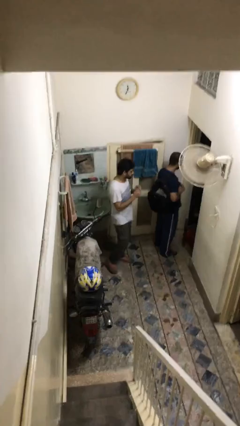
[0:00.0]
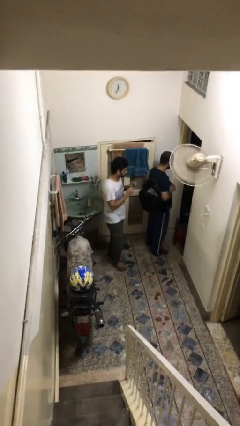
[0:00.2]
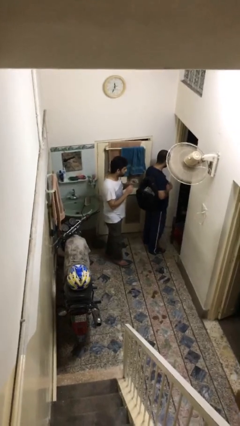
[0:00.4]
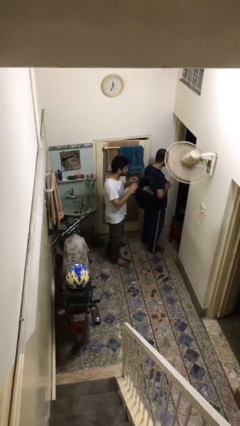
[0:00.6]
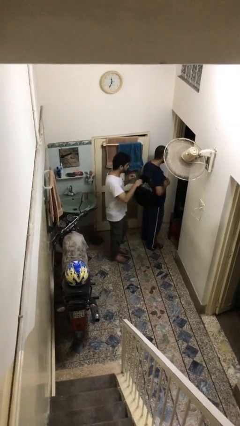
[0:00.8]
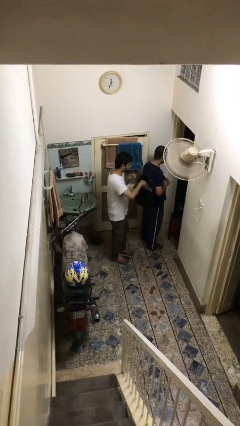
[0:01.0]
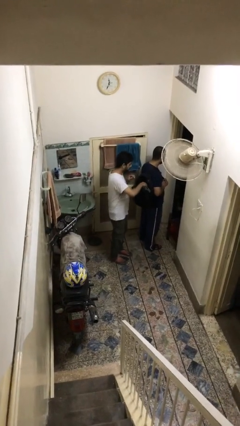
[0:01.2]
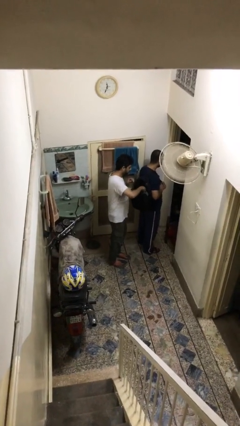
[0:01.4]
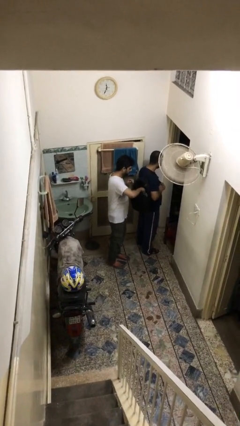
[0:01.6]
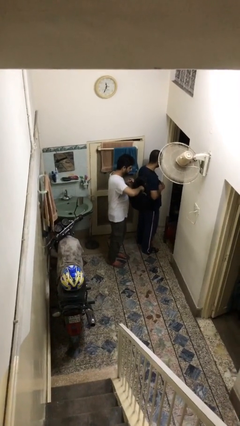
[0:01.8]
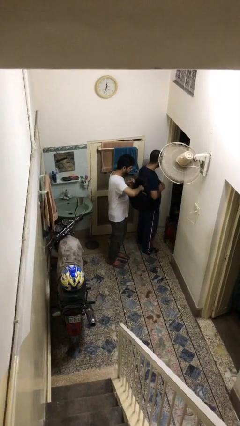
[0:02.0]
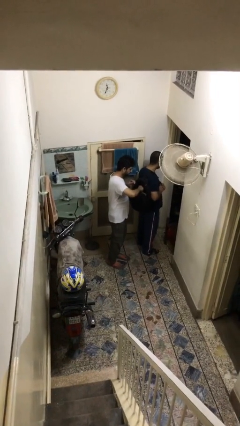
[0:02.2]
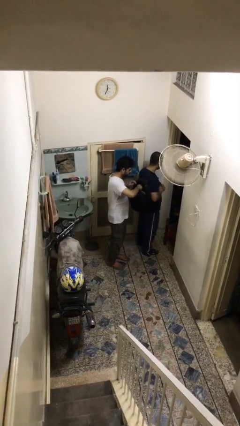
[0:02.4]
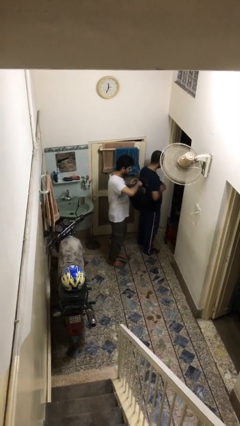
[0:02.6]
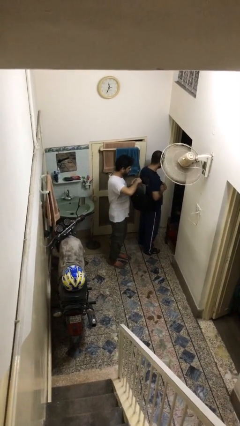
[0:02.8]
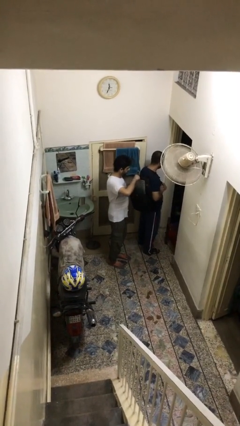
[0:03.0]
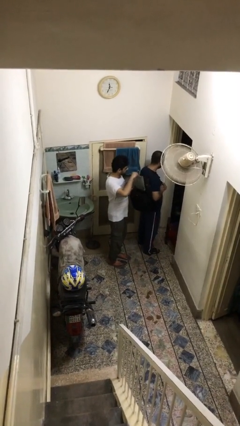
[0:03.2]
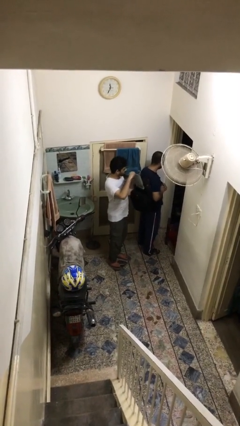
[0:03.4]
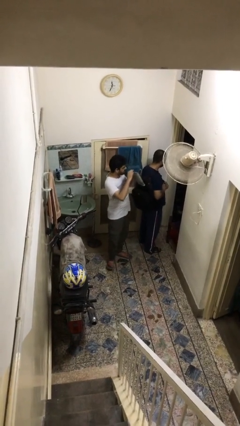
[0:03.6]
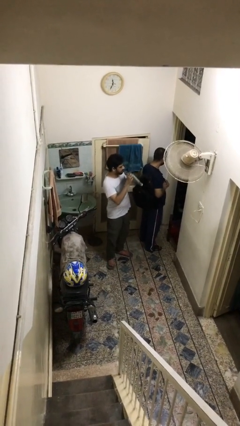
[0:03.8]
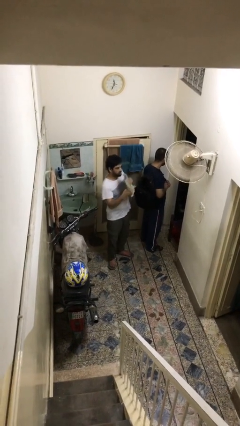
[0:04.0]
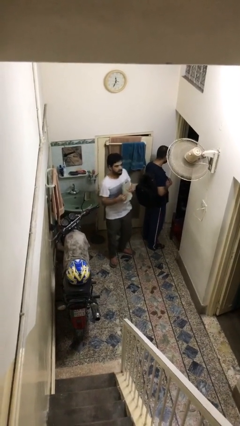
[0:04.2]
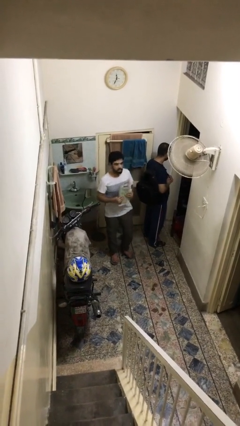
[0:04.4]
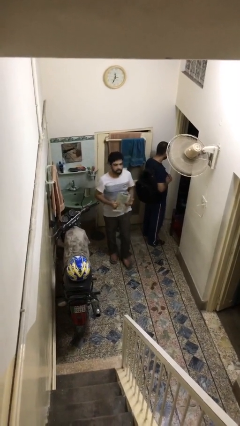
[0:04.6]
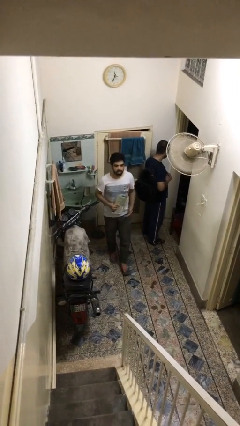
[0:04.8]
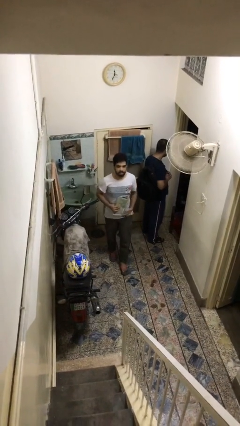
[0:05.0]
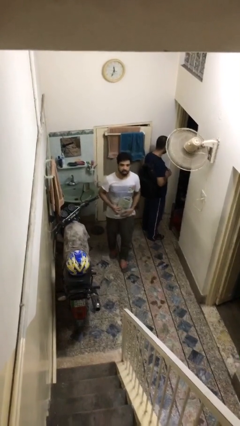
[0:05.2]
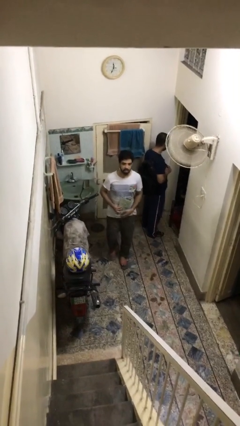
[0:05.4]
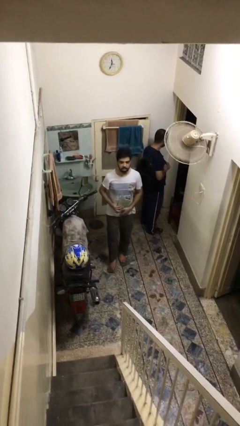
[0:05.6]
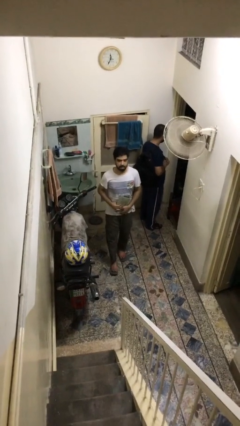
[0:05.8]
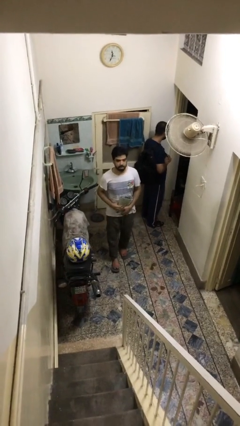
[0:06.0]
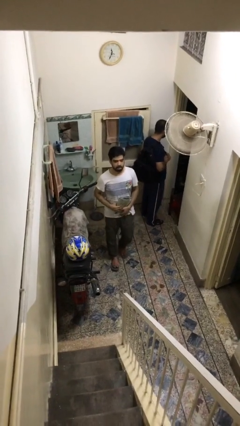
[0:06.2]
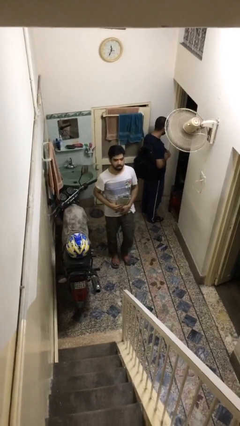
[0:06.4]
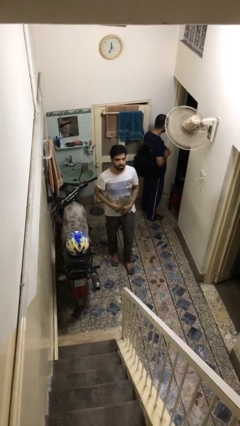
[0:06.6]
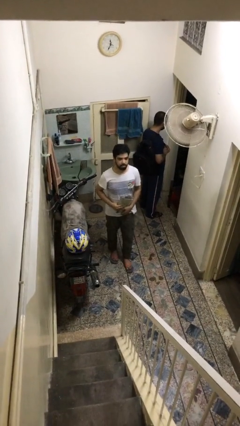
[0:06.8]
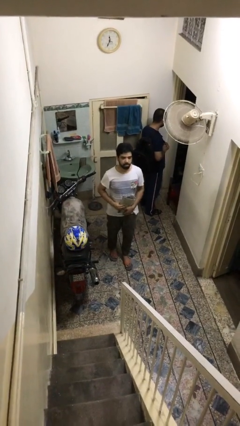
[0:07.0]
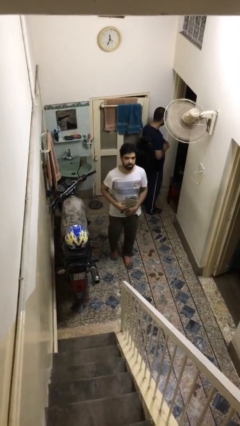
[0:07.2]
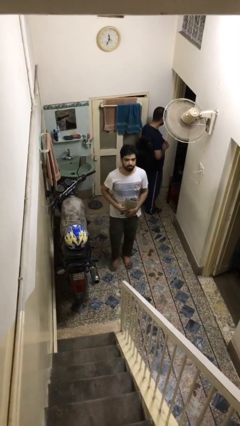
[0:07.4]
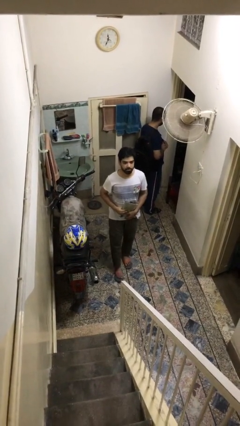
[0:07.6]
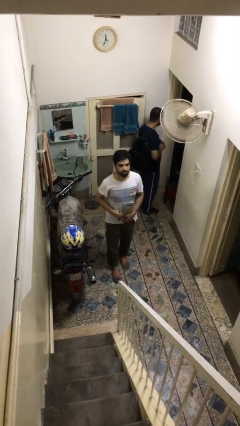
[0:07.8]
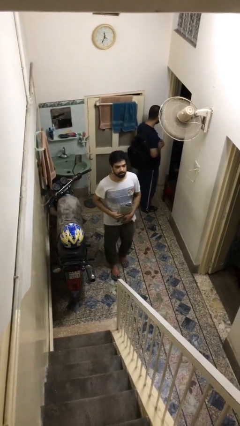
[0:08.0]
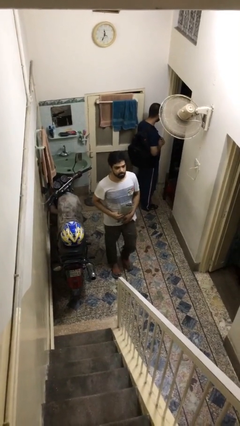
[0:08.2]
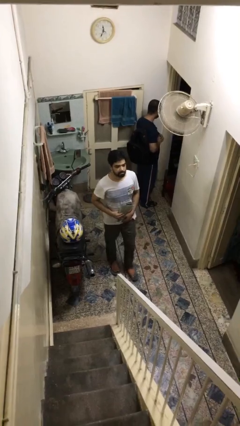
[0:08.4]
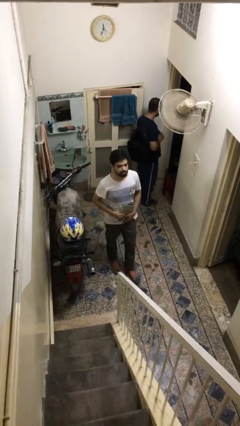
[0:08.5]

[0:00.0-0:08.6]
person steals object from person

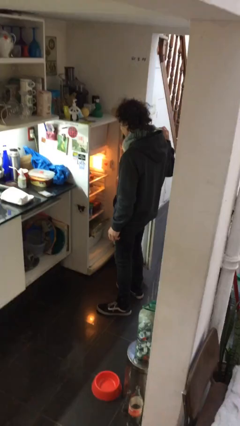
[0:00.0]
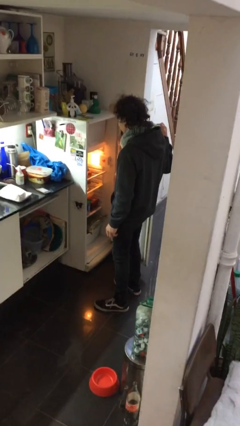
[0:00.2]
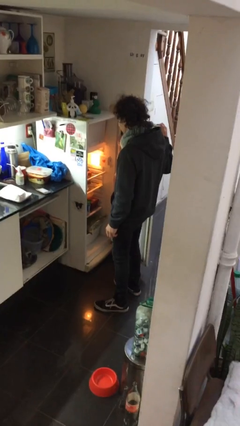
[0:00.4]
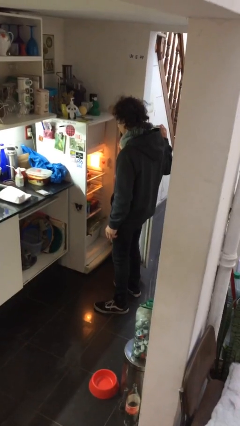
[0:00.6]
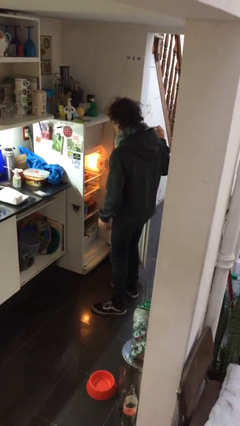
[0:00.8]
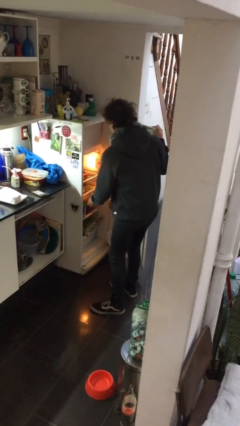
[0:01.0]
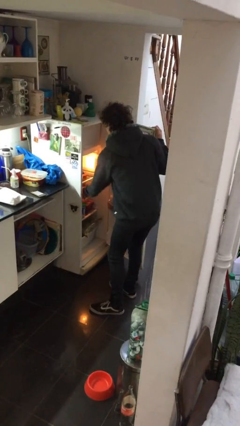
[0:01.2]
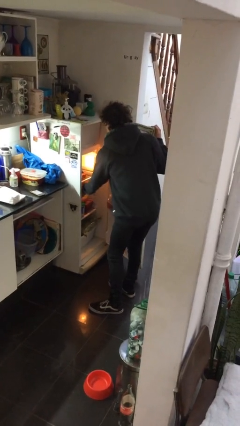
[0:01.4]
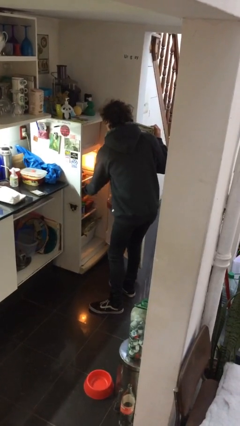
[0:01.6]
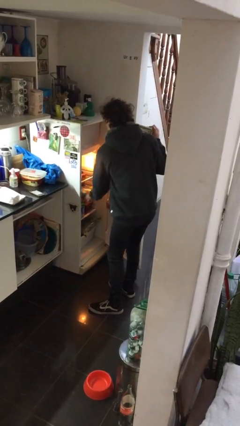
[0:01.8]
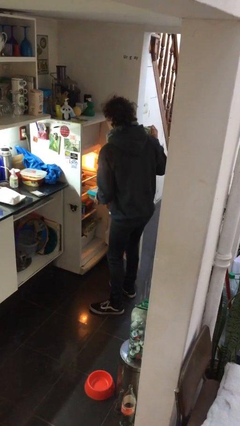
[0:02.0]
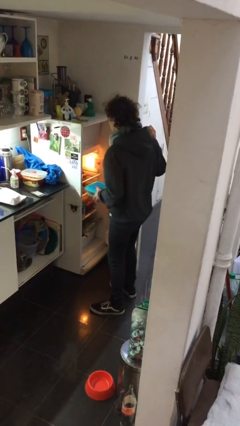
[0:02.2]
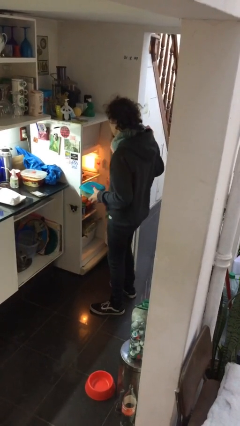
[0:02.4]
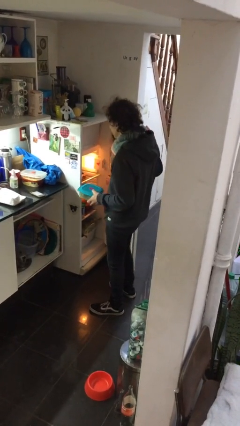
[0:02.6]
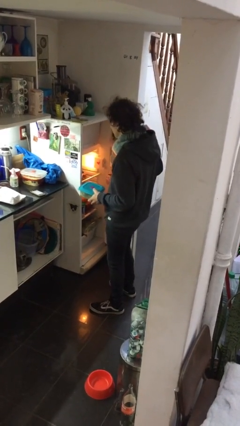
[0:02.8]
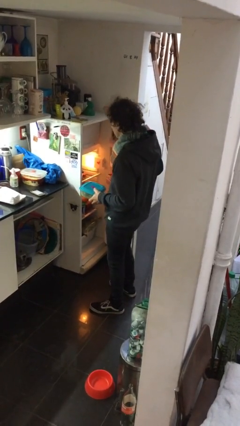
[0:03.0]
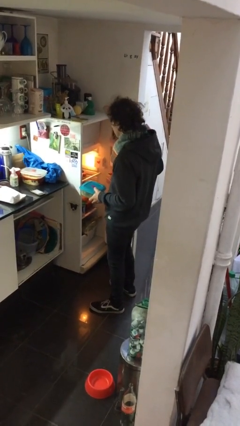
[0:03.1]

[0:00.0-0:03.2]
person takes object from refrigerator

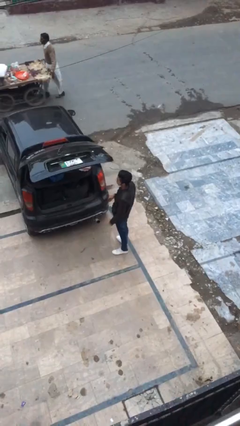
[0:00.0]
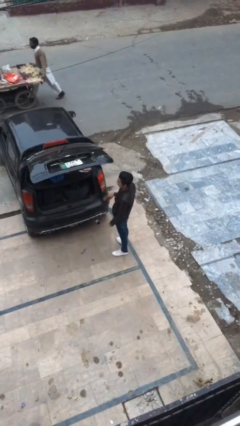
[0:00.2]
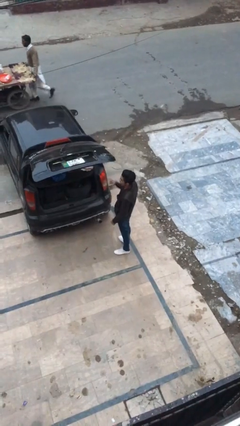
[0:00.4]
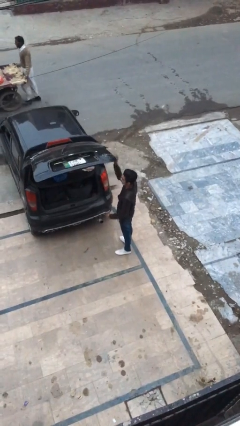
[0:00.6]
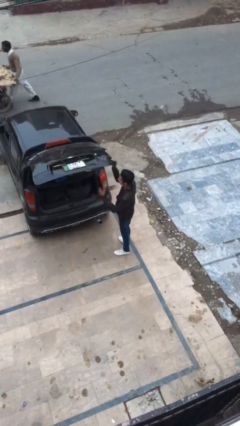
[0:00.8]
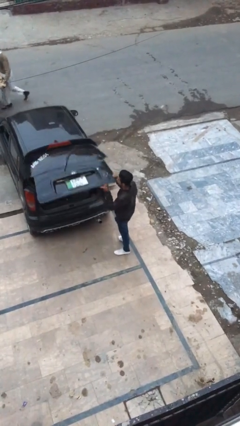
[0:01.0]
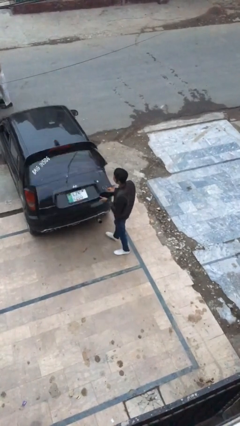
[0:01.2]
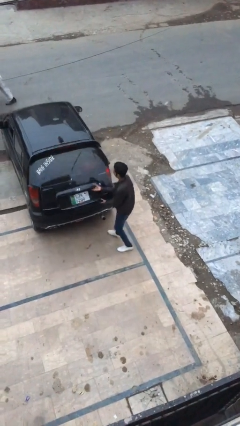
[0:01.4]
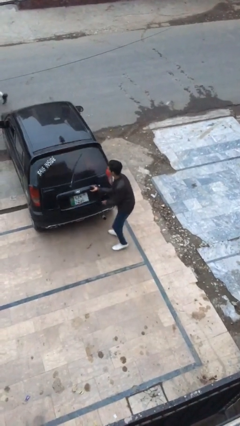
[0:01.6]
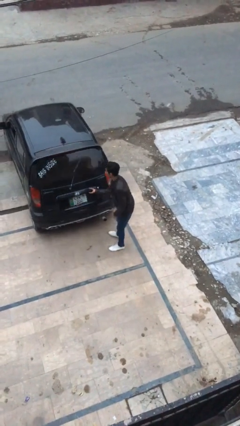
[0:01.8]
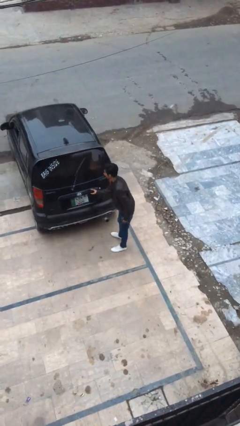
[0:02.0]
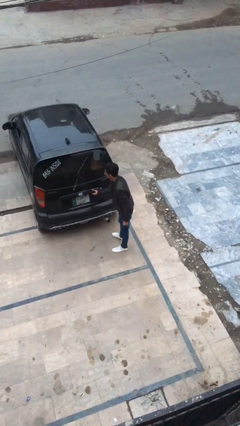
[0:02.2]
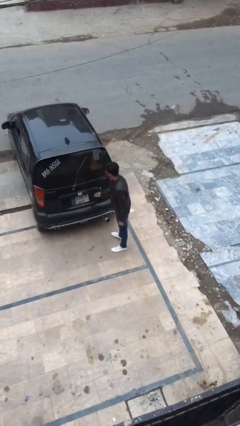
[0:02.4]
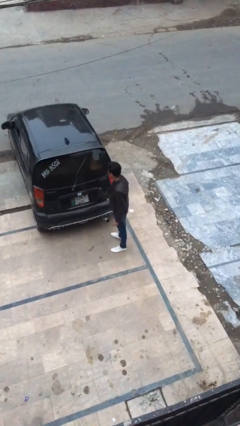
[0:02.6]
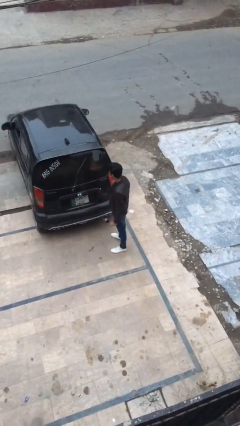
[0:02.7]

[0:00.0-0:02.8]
person closes car trunk

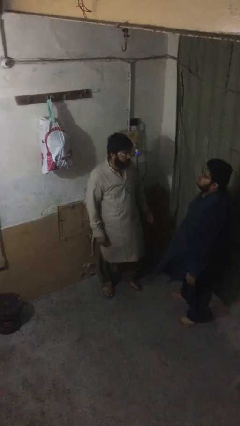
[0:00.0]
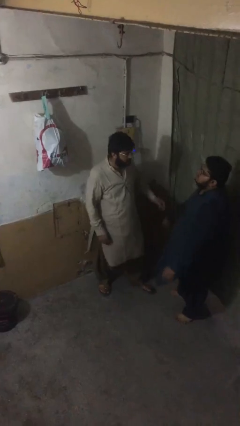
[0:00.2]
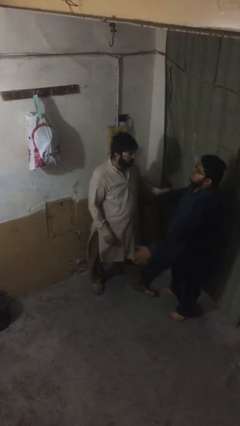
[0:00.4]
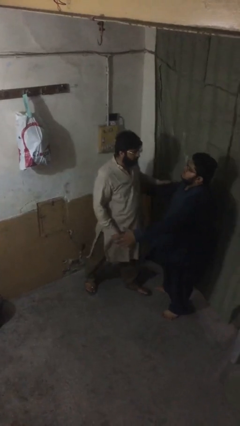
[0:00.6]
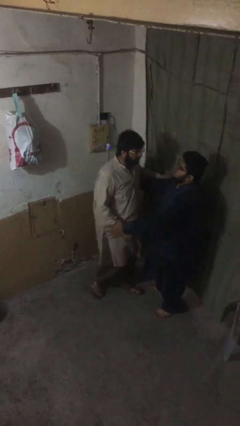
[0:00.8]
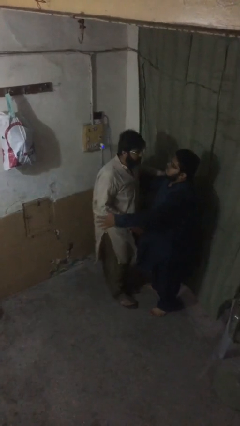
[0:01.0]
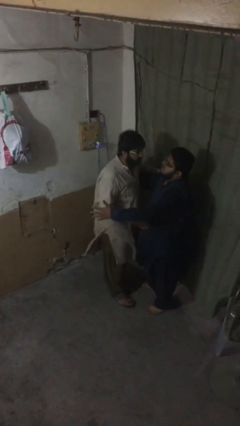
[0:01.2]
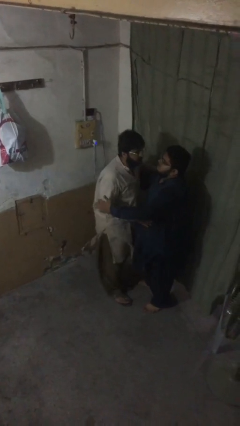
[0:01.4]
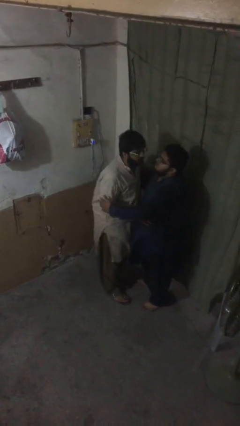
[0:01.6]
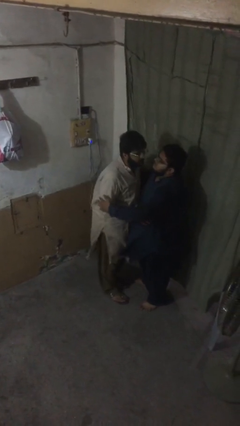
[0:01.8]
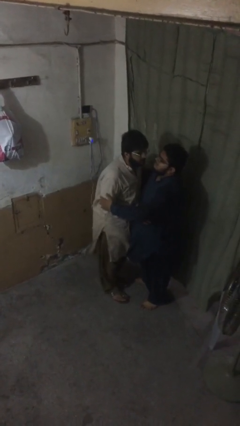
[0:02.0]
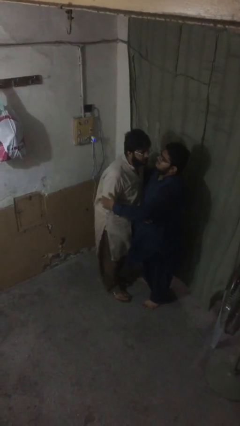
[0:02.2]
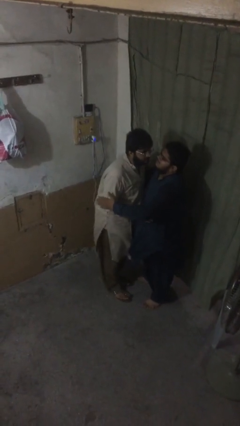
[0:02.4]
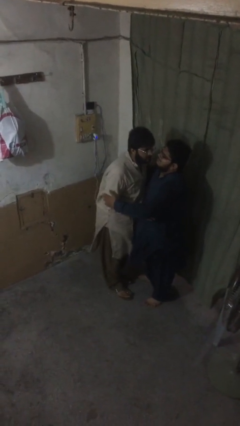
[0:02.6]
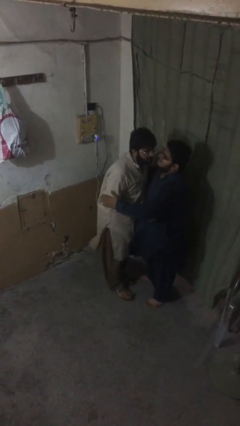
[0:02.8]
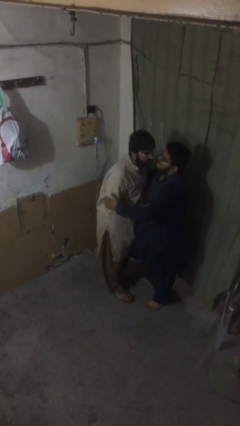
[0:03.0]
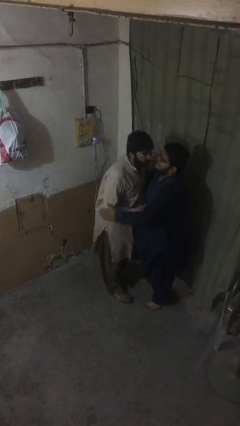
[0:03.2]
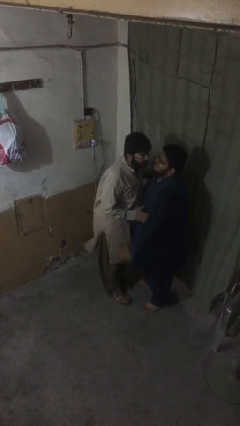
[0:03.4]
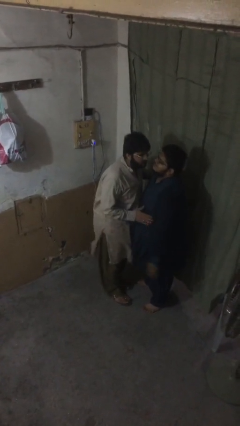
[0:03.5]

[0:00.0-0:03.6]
person embraces person
